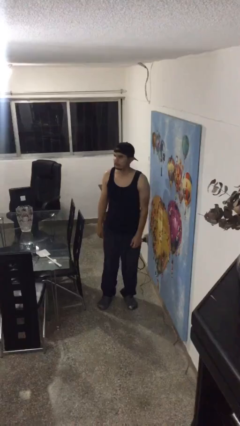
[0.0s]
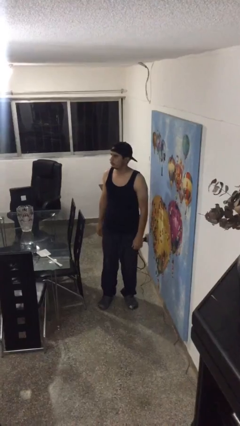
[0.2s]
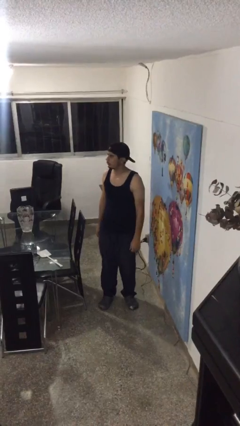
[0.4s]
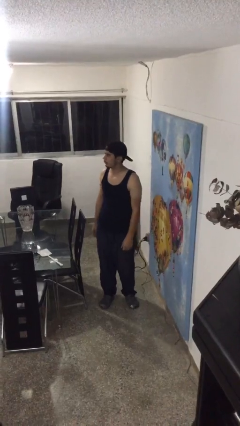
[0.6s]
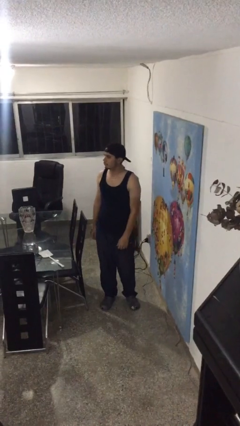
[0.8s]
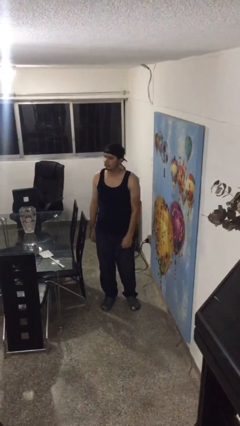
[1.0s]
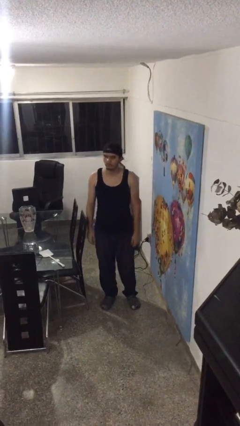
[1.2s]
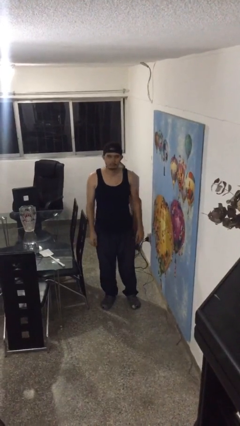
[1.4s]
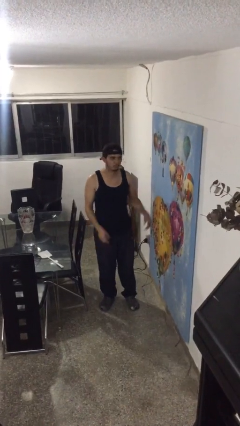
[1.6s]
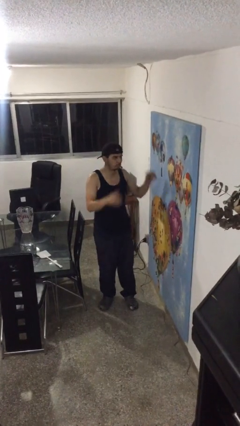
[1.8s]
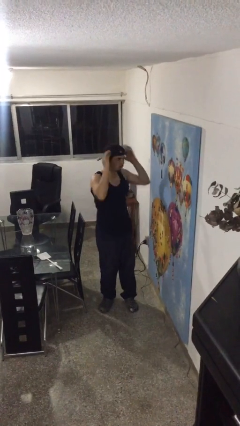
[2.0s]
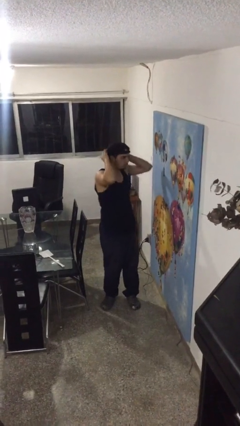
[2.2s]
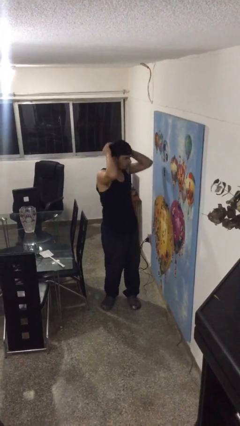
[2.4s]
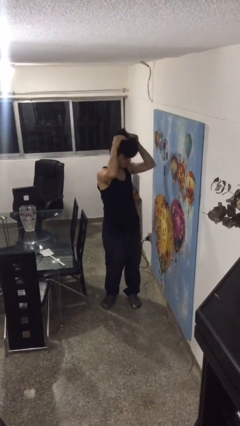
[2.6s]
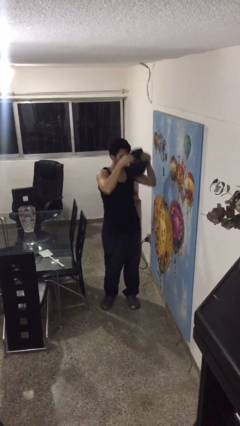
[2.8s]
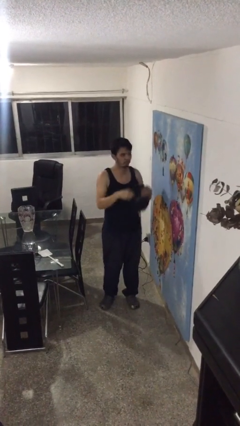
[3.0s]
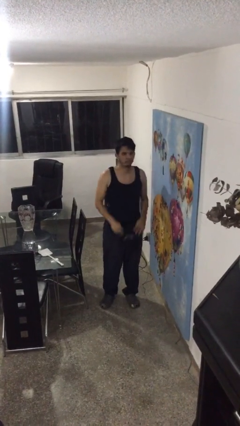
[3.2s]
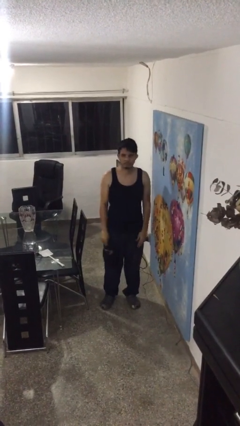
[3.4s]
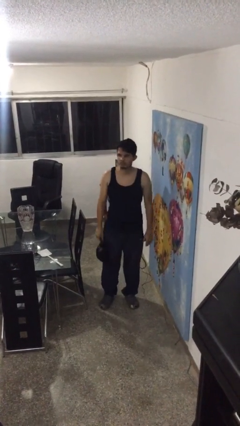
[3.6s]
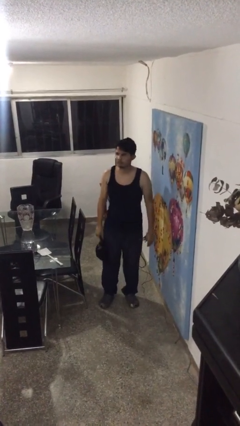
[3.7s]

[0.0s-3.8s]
person takes off hat

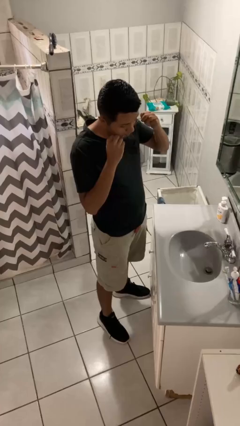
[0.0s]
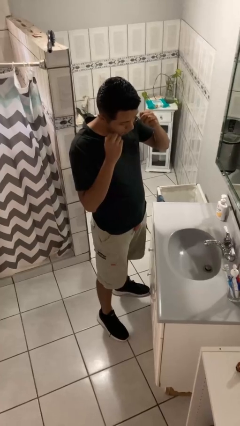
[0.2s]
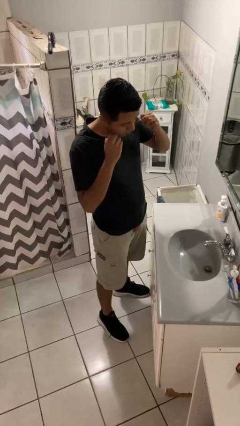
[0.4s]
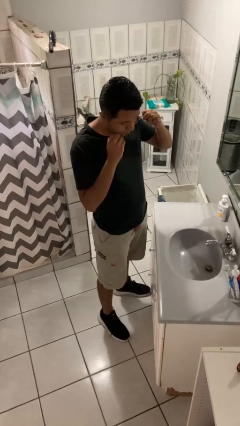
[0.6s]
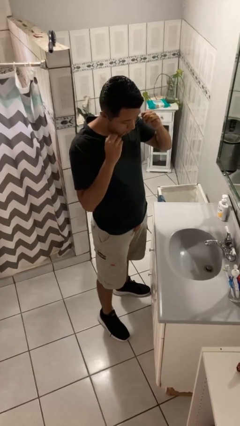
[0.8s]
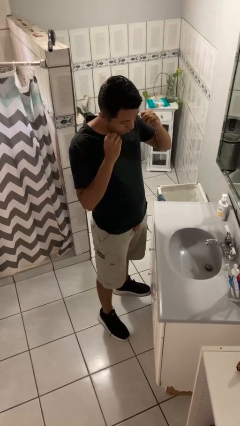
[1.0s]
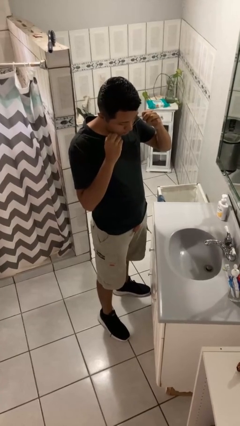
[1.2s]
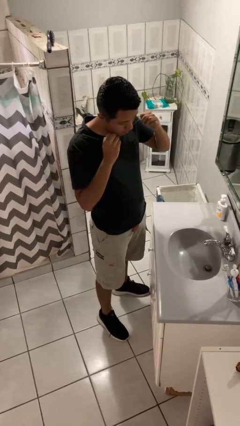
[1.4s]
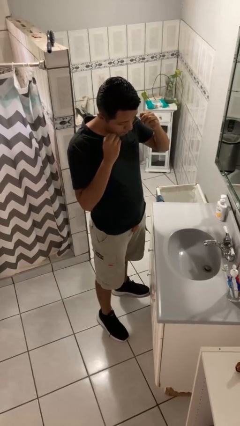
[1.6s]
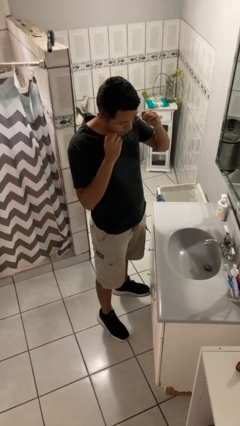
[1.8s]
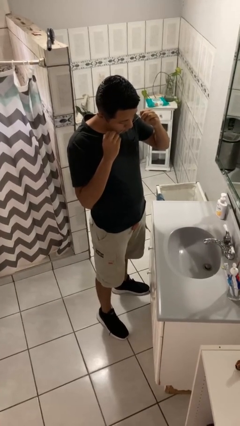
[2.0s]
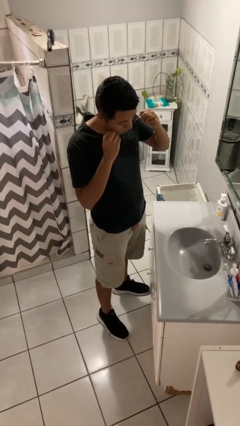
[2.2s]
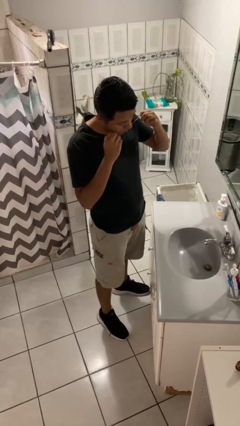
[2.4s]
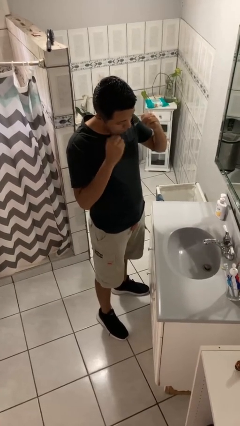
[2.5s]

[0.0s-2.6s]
person flosses

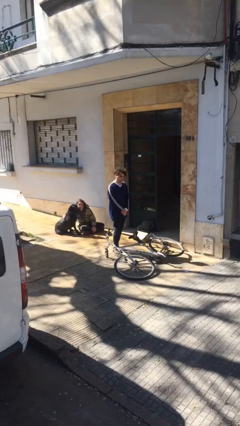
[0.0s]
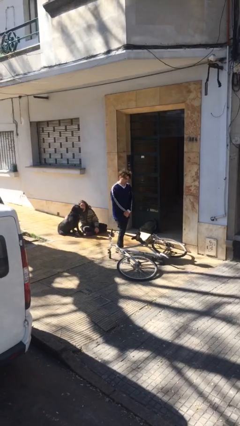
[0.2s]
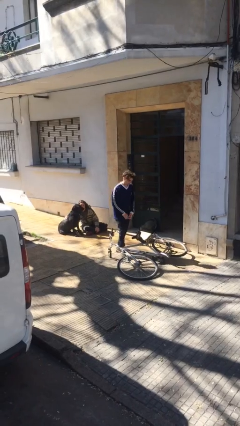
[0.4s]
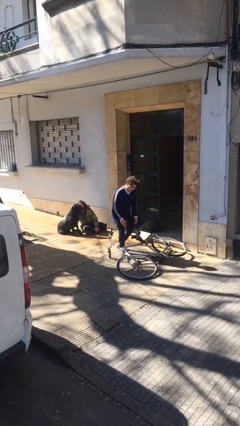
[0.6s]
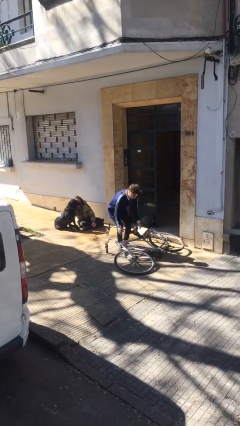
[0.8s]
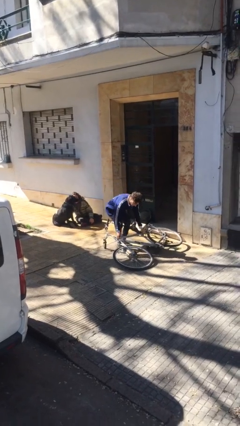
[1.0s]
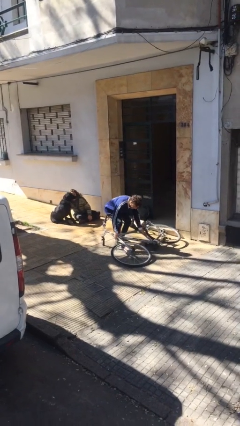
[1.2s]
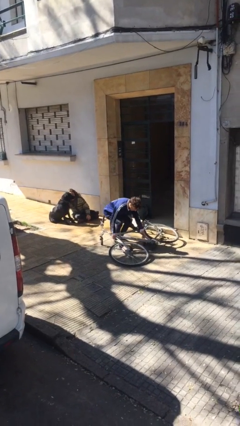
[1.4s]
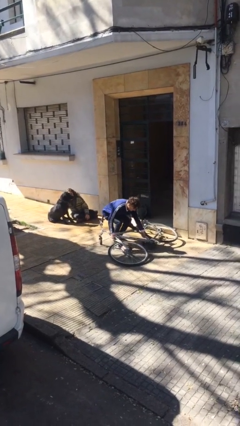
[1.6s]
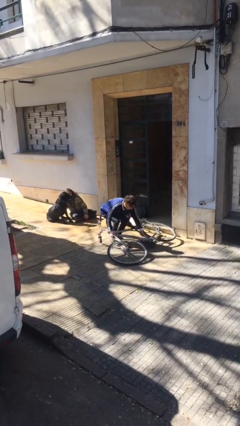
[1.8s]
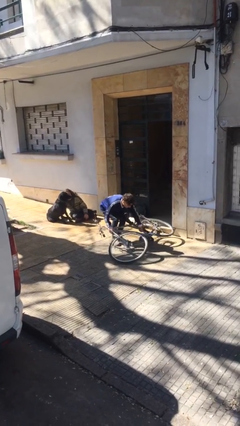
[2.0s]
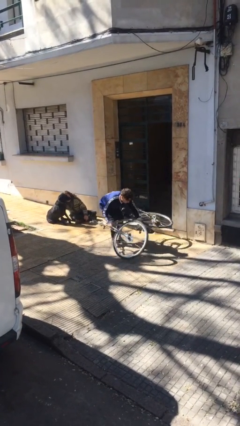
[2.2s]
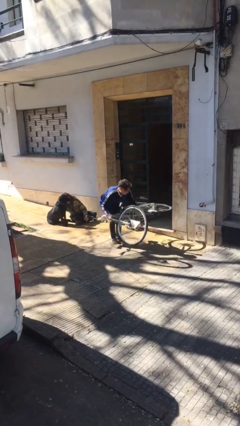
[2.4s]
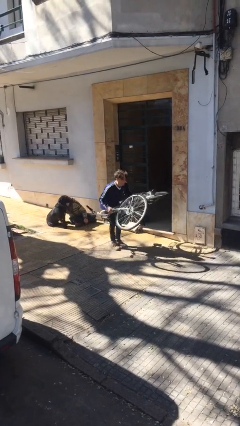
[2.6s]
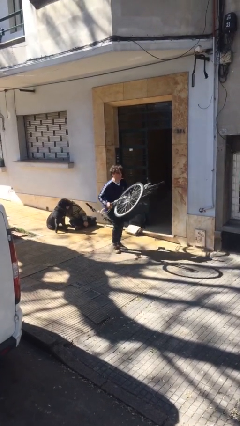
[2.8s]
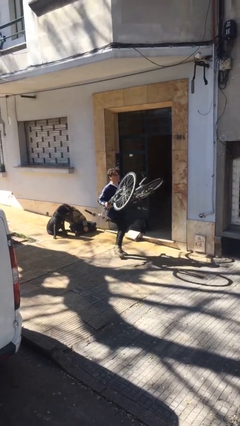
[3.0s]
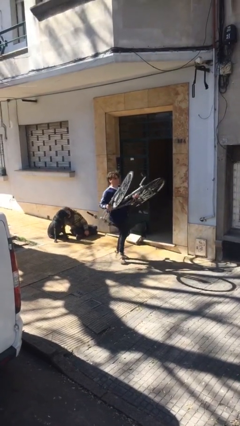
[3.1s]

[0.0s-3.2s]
person picks up object from floor

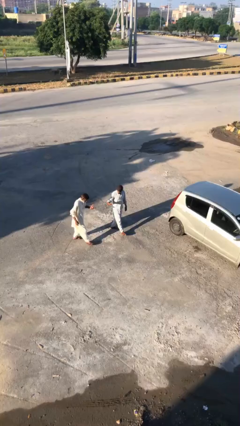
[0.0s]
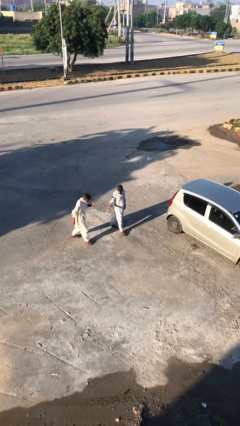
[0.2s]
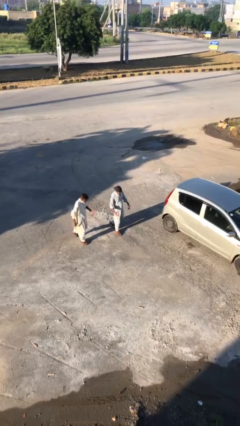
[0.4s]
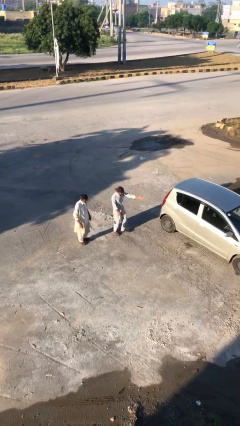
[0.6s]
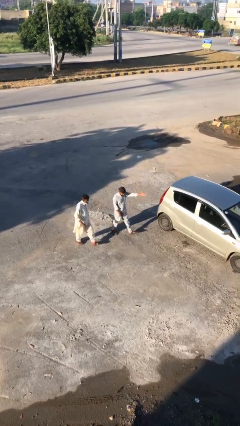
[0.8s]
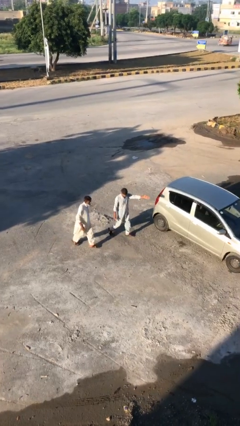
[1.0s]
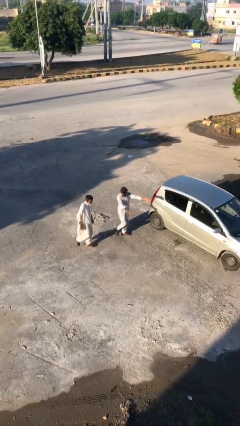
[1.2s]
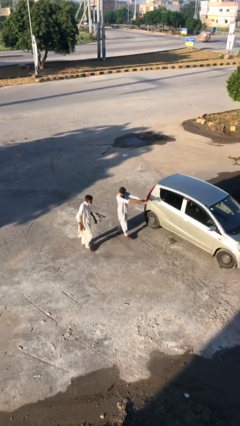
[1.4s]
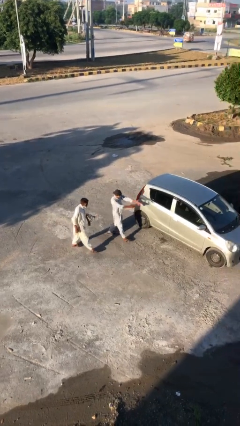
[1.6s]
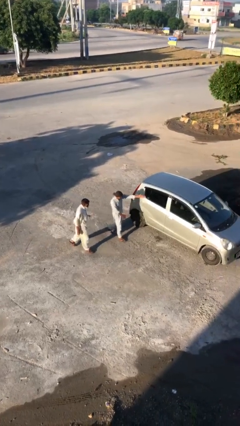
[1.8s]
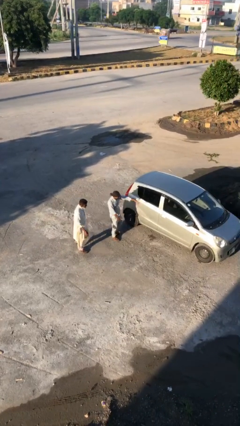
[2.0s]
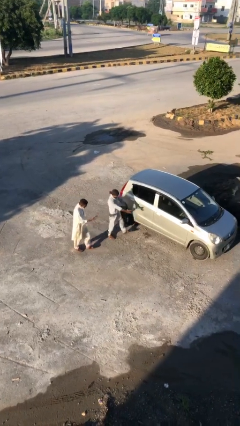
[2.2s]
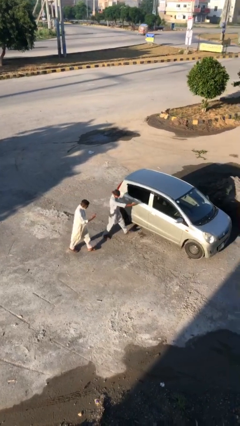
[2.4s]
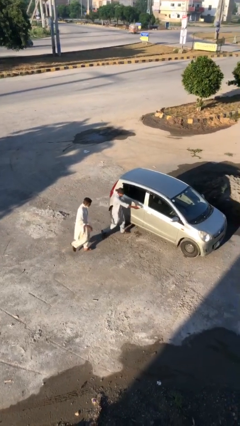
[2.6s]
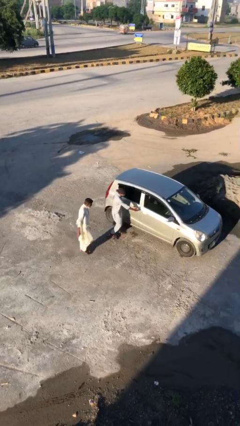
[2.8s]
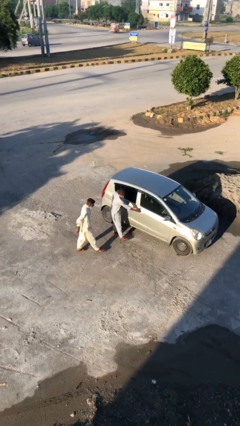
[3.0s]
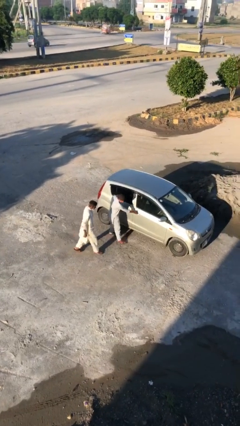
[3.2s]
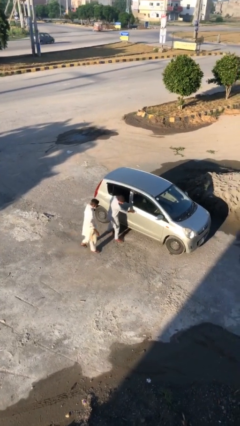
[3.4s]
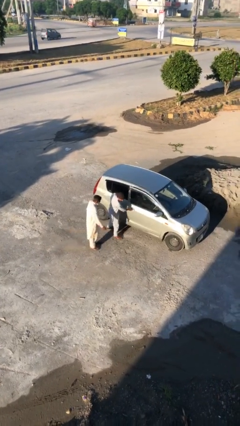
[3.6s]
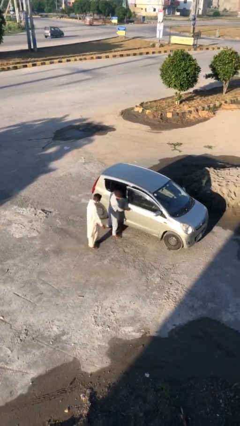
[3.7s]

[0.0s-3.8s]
person talks to person

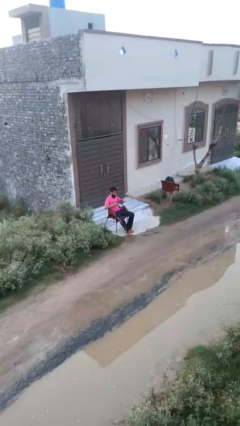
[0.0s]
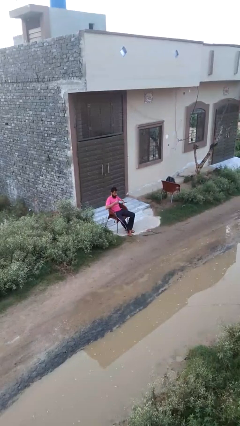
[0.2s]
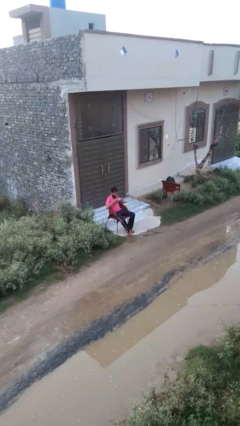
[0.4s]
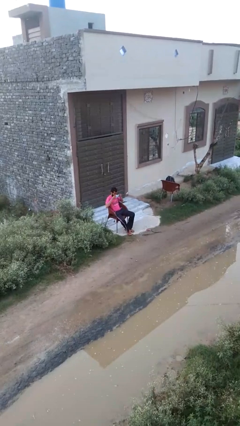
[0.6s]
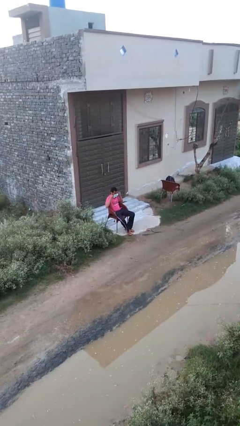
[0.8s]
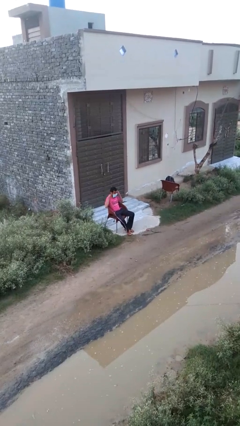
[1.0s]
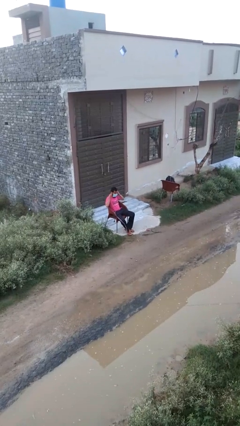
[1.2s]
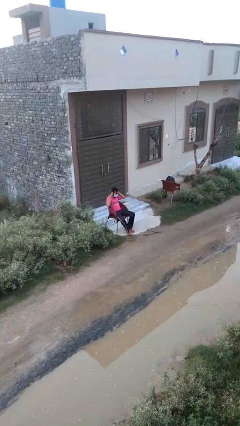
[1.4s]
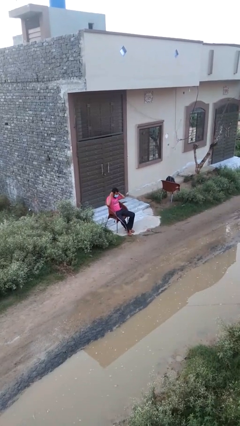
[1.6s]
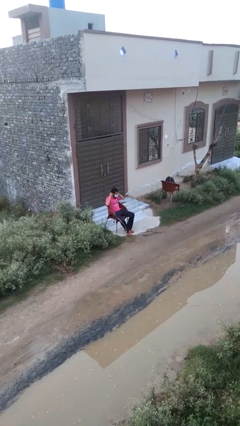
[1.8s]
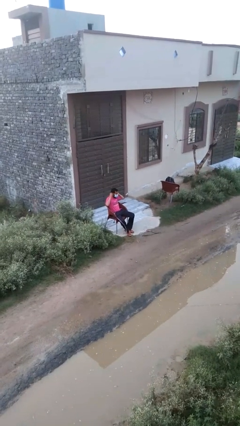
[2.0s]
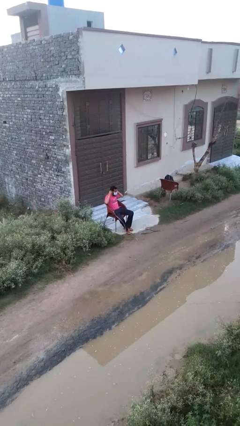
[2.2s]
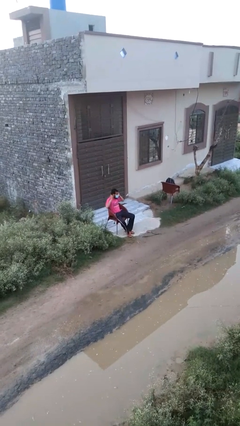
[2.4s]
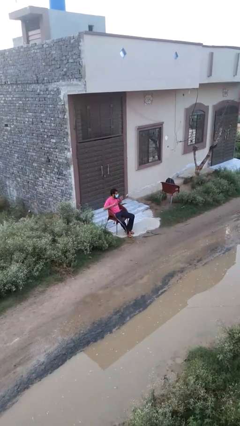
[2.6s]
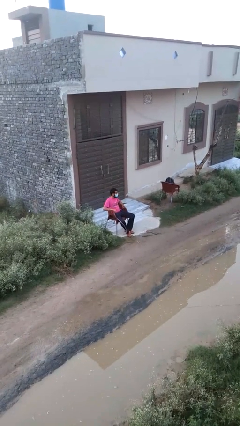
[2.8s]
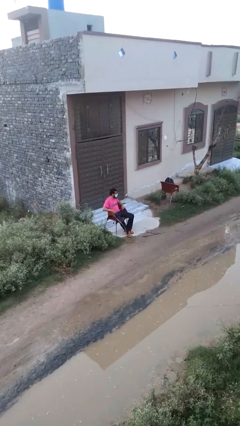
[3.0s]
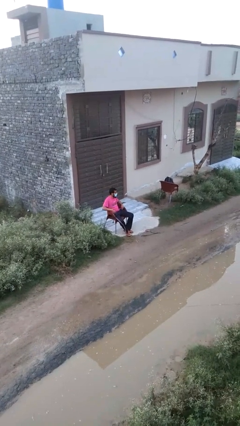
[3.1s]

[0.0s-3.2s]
person puts on facemask

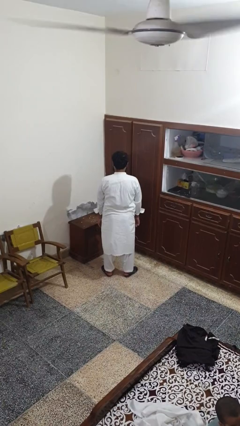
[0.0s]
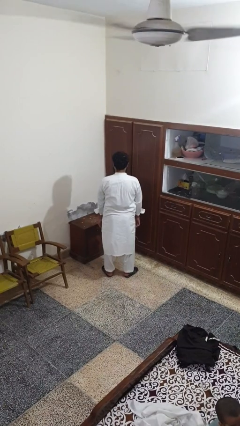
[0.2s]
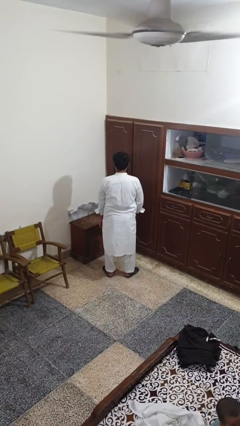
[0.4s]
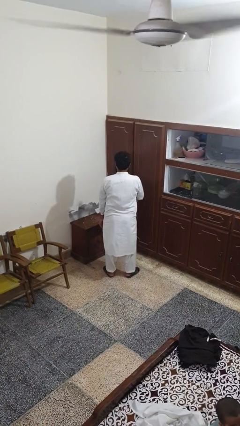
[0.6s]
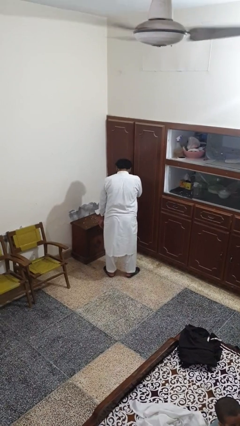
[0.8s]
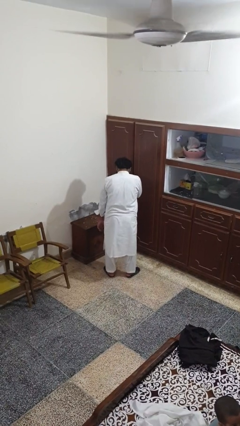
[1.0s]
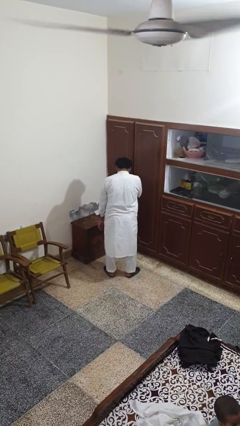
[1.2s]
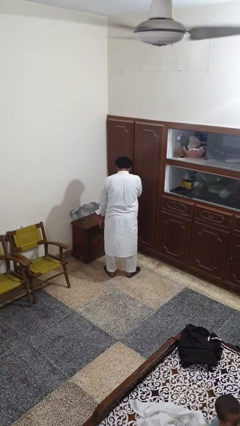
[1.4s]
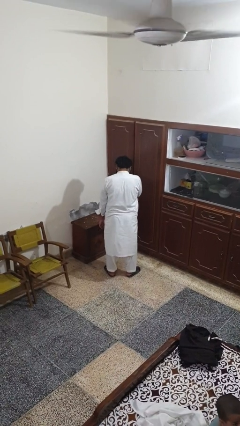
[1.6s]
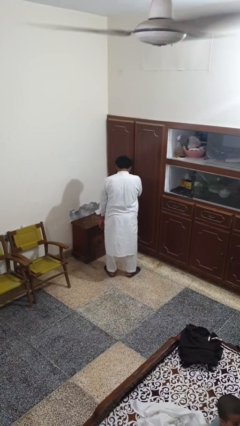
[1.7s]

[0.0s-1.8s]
person sneezes into hand
